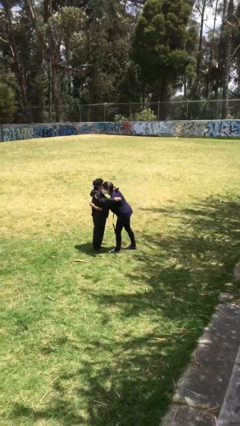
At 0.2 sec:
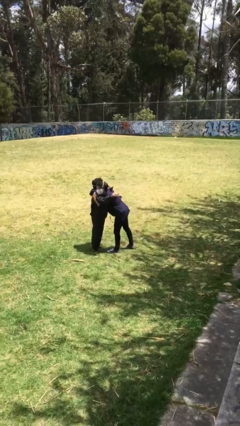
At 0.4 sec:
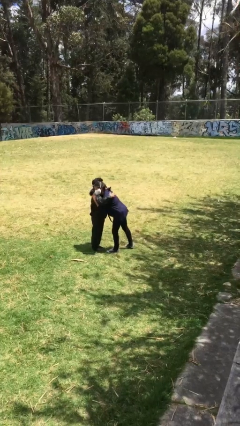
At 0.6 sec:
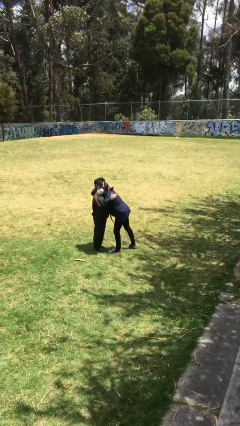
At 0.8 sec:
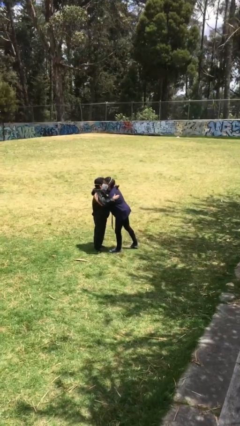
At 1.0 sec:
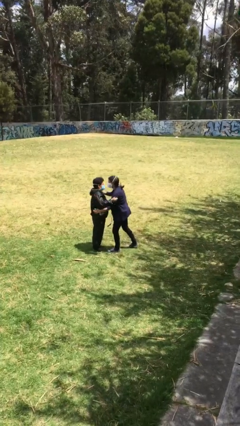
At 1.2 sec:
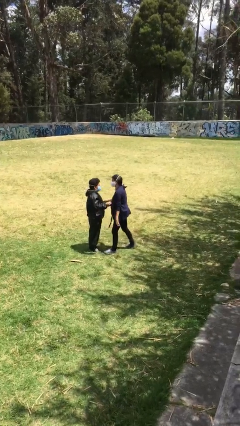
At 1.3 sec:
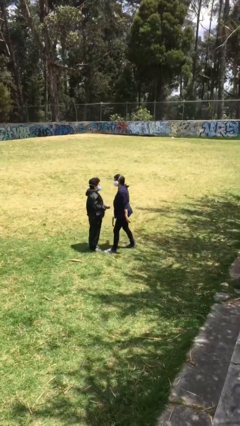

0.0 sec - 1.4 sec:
person embraces person

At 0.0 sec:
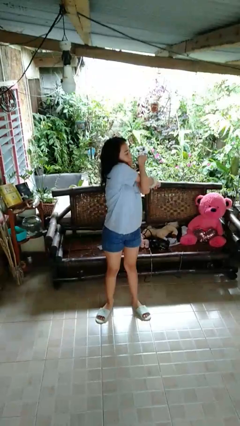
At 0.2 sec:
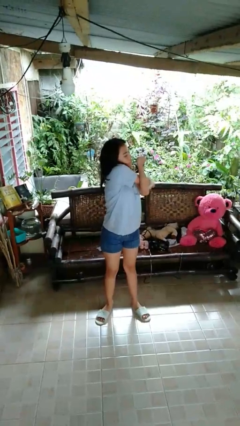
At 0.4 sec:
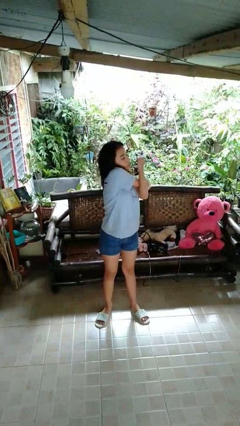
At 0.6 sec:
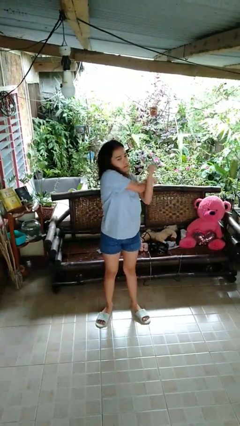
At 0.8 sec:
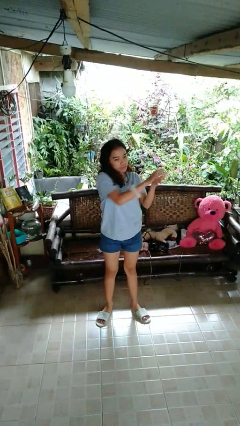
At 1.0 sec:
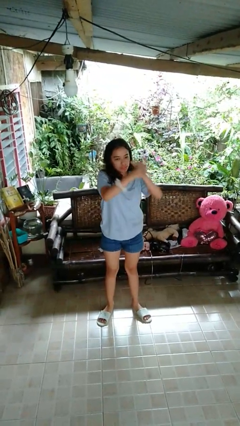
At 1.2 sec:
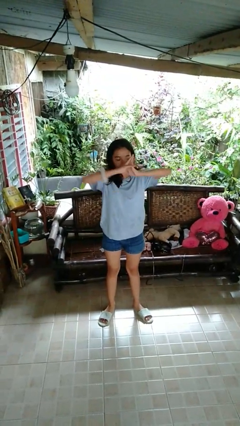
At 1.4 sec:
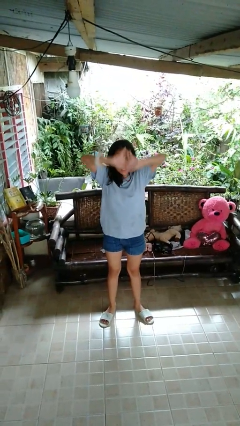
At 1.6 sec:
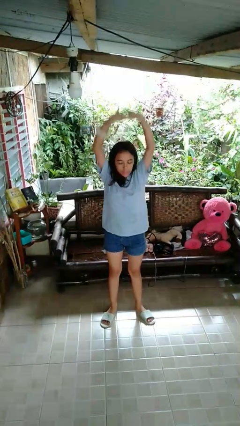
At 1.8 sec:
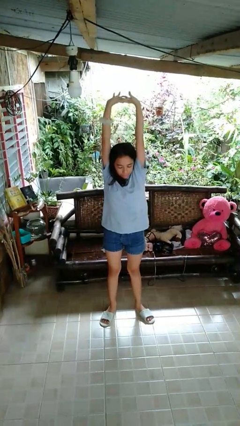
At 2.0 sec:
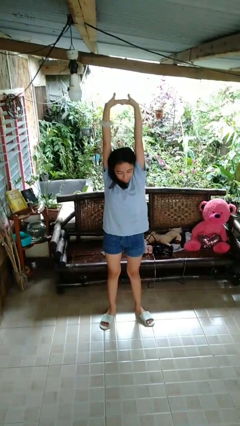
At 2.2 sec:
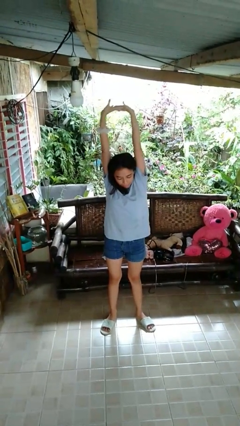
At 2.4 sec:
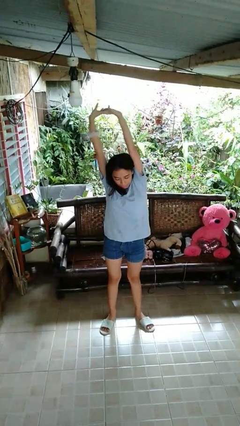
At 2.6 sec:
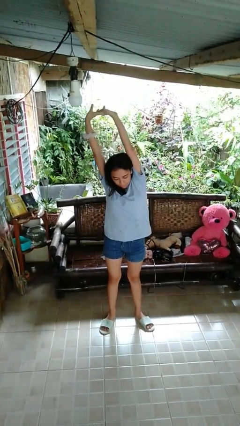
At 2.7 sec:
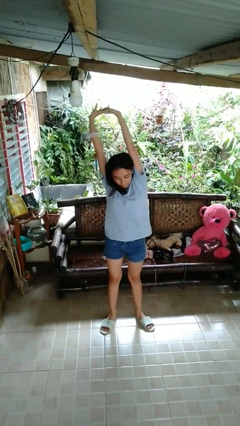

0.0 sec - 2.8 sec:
person stretches arms over head

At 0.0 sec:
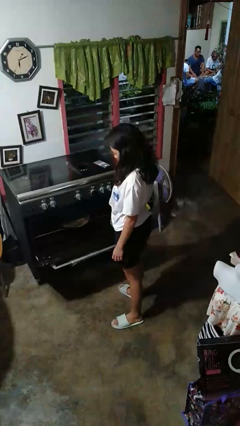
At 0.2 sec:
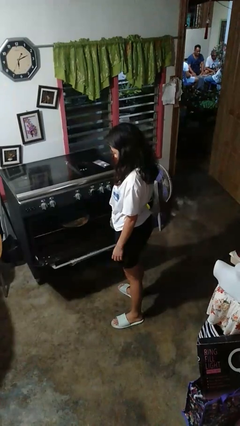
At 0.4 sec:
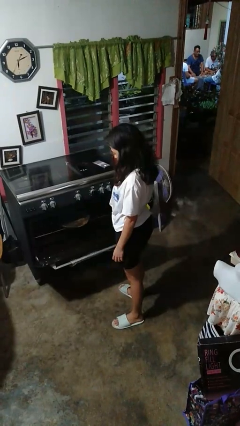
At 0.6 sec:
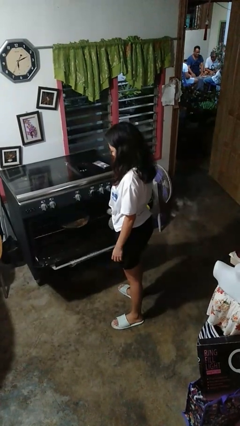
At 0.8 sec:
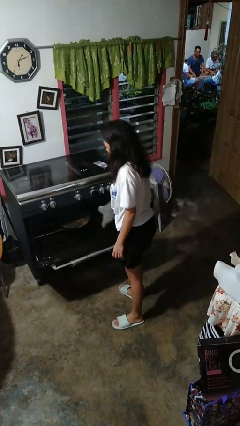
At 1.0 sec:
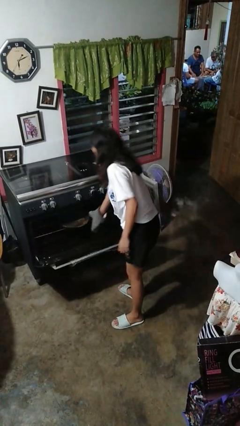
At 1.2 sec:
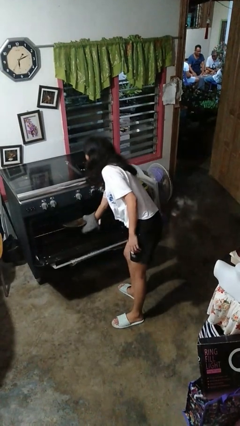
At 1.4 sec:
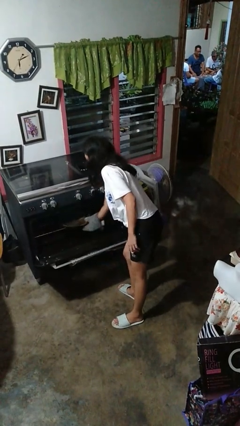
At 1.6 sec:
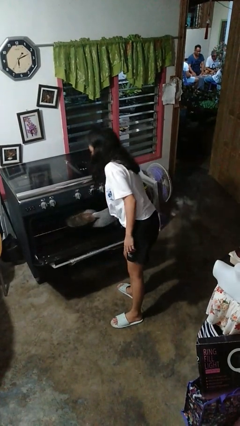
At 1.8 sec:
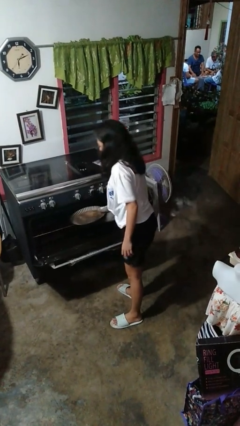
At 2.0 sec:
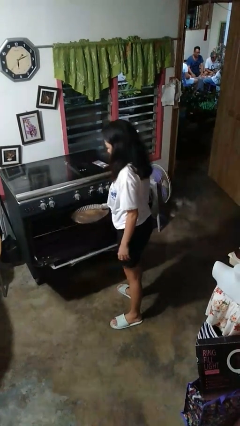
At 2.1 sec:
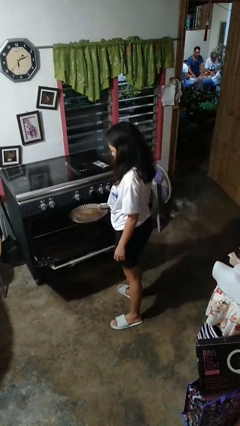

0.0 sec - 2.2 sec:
person takes object from oven

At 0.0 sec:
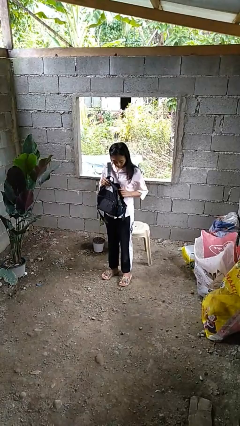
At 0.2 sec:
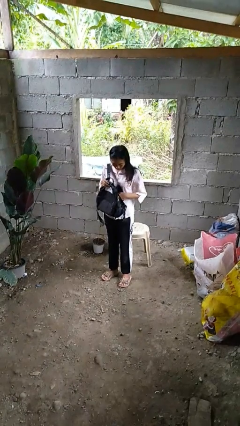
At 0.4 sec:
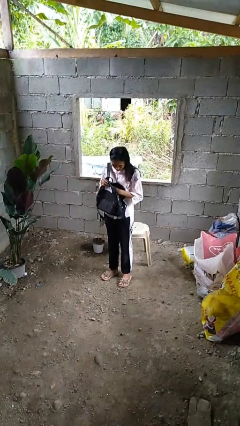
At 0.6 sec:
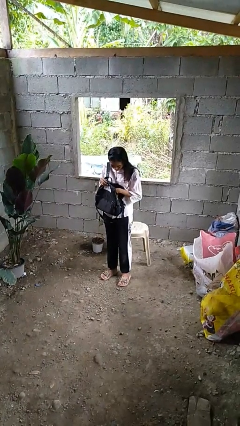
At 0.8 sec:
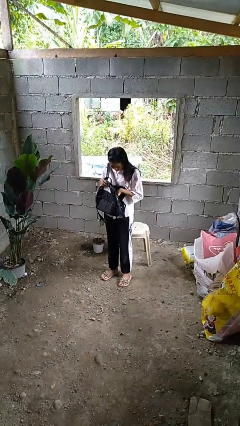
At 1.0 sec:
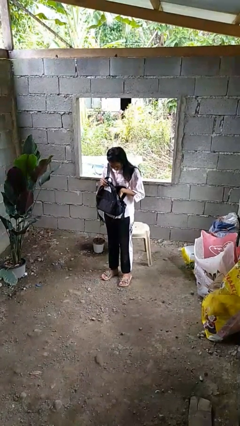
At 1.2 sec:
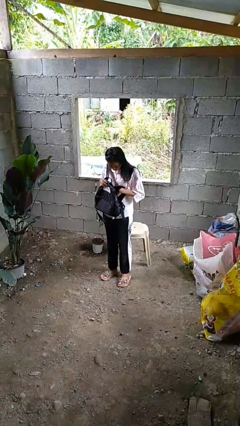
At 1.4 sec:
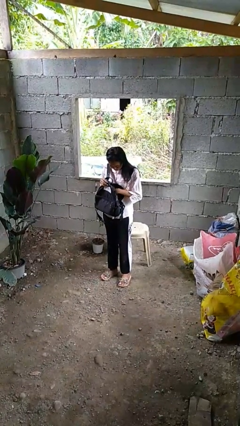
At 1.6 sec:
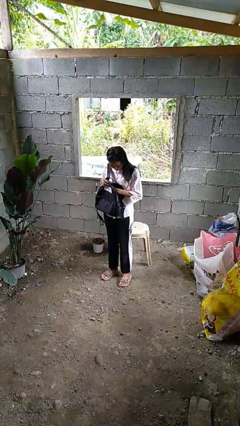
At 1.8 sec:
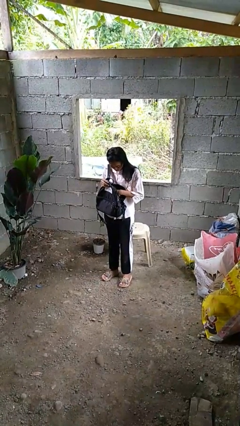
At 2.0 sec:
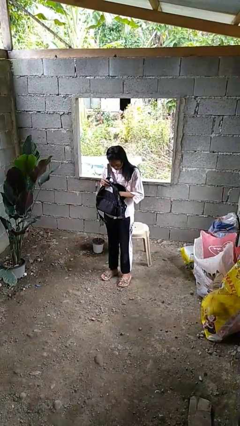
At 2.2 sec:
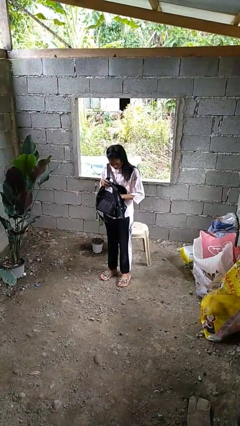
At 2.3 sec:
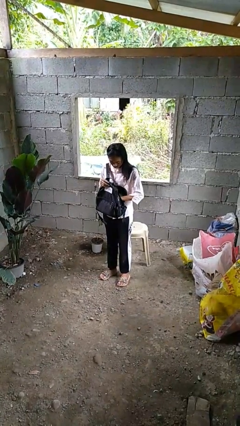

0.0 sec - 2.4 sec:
person searches in backpack

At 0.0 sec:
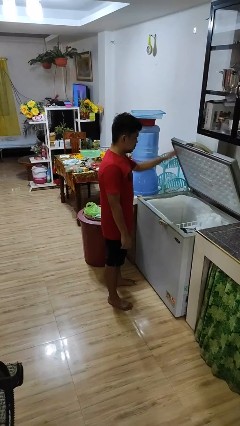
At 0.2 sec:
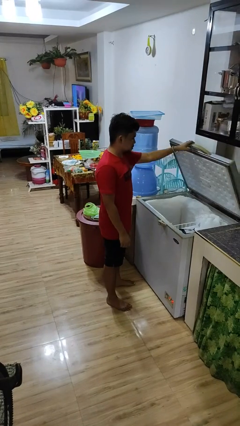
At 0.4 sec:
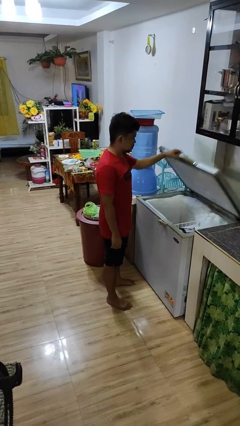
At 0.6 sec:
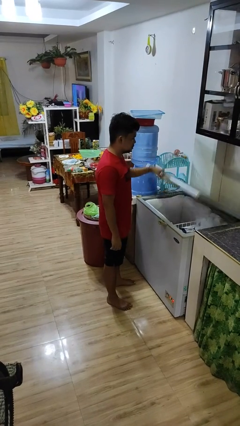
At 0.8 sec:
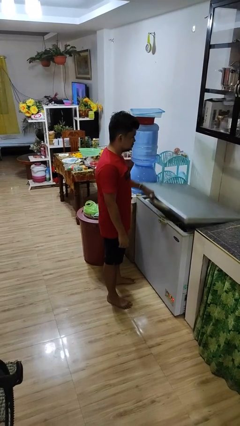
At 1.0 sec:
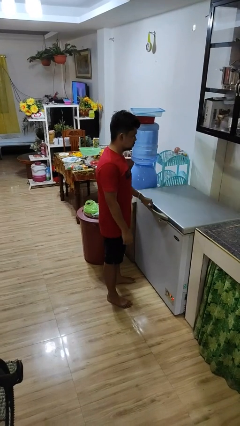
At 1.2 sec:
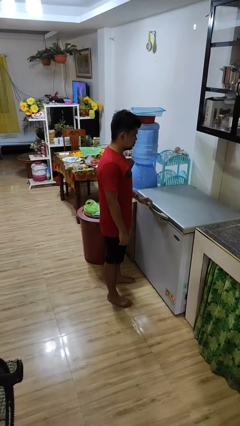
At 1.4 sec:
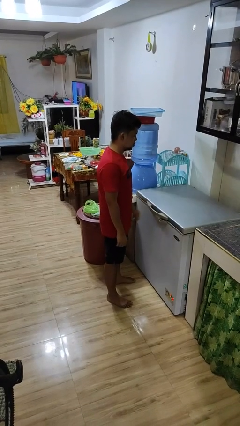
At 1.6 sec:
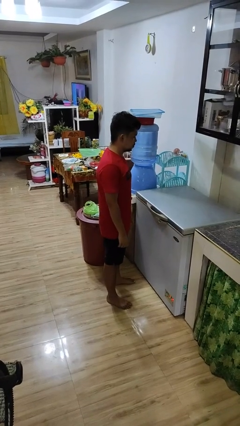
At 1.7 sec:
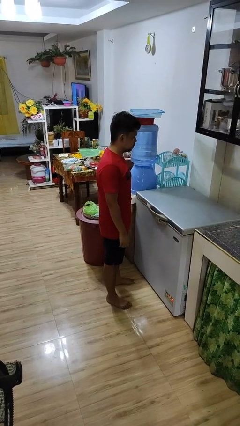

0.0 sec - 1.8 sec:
person closes refrigerator

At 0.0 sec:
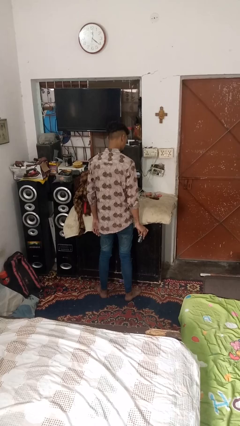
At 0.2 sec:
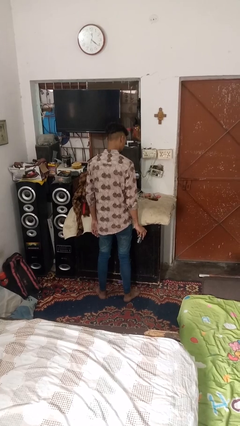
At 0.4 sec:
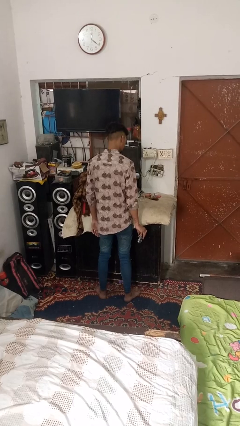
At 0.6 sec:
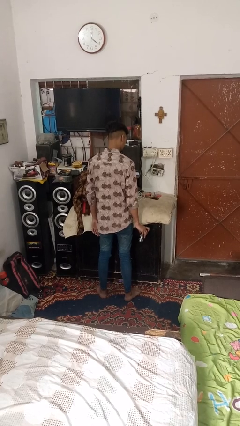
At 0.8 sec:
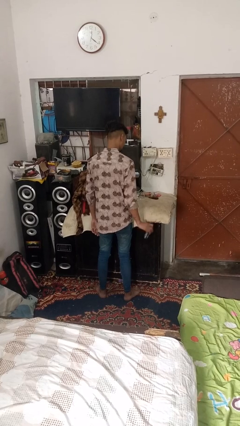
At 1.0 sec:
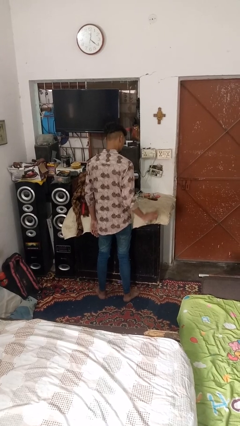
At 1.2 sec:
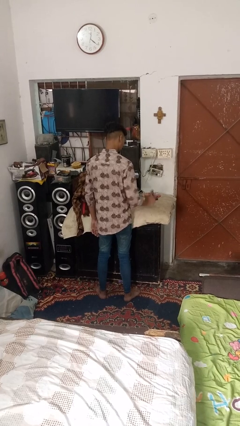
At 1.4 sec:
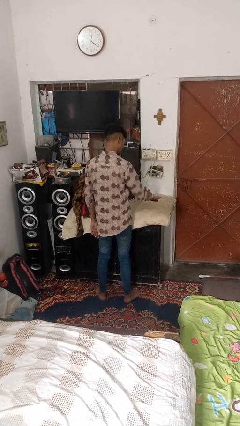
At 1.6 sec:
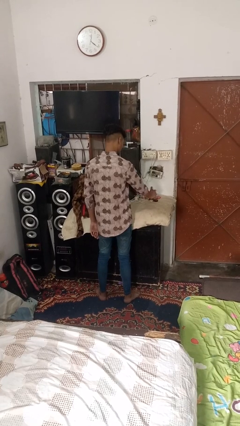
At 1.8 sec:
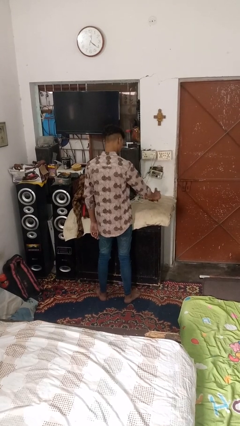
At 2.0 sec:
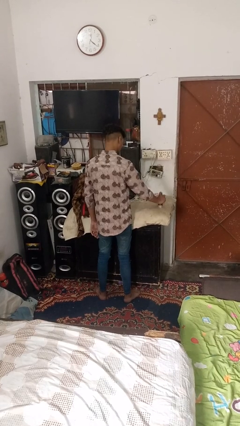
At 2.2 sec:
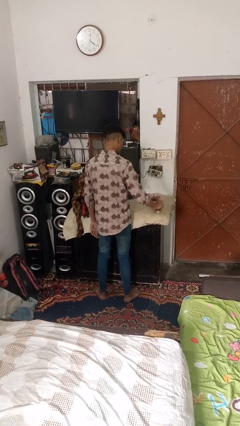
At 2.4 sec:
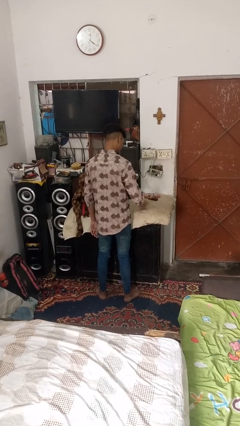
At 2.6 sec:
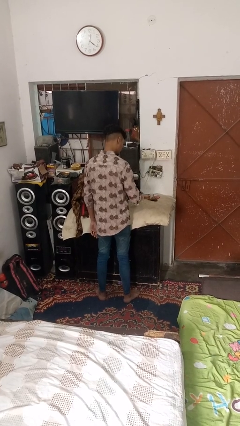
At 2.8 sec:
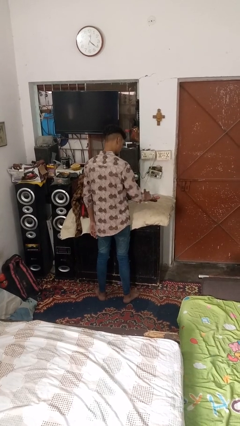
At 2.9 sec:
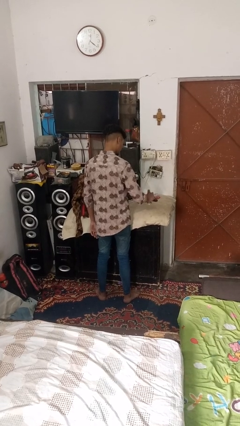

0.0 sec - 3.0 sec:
person sprays from bottle

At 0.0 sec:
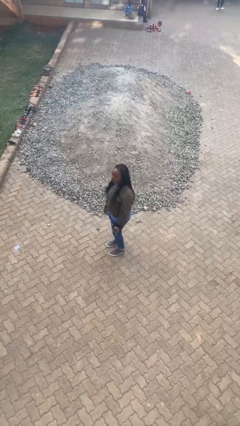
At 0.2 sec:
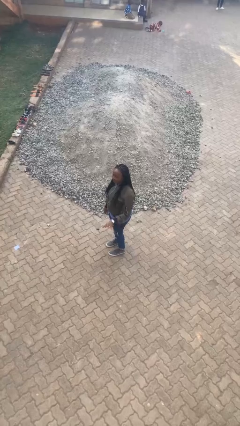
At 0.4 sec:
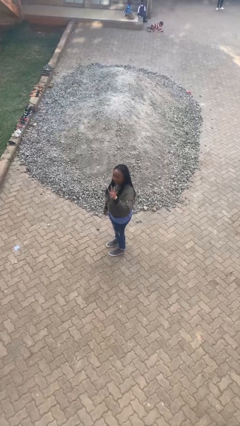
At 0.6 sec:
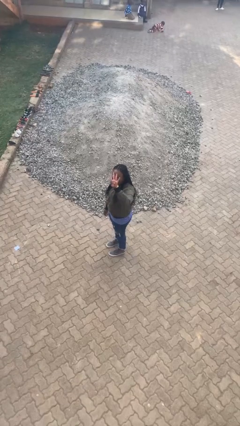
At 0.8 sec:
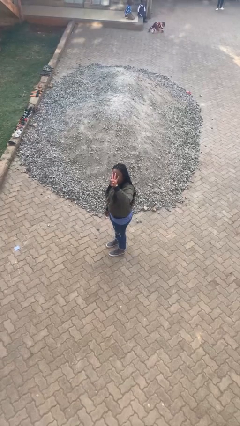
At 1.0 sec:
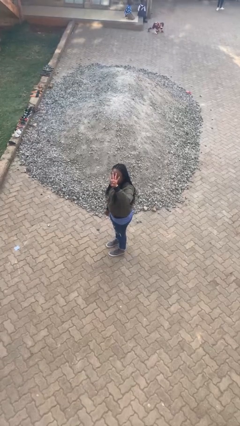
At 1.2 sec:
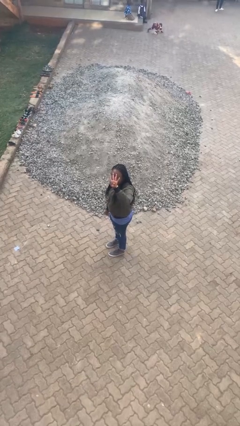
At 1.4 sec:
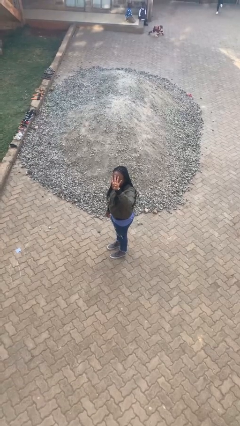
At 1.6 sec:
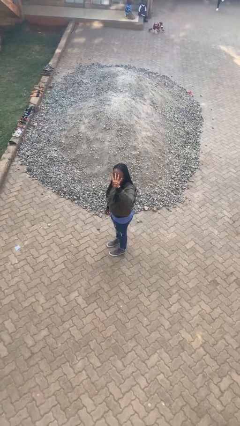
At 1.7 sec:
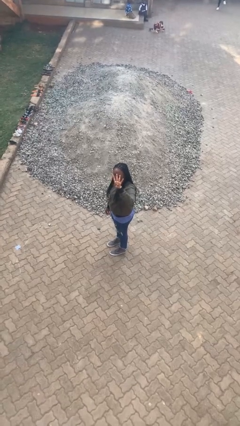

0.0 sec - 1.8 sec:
person gestures number four

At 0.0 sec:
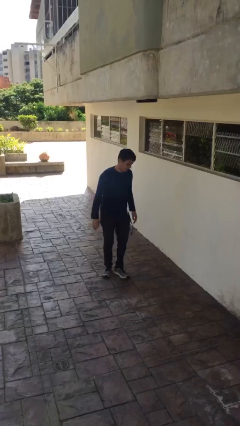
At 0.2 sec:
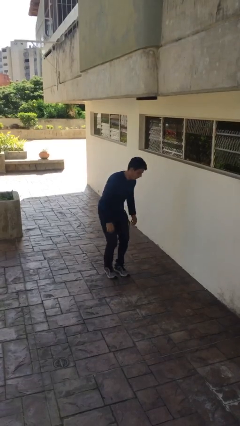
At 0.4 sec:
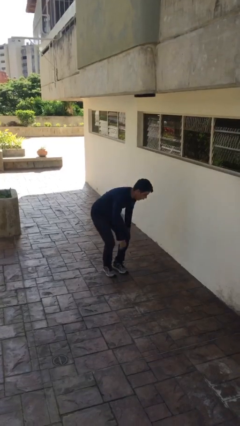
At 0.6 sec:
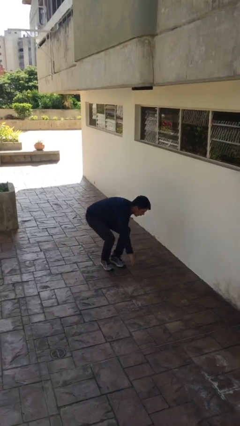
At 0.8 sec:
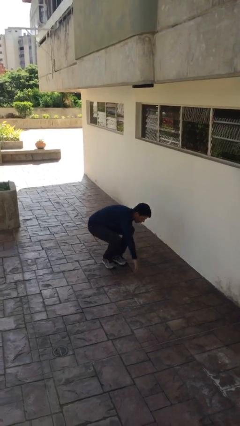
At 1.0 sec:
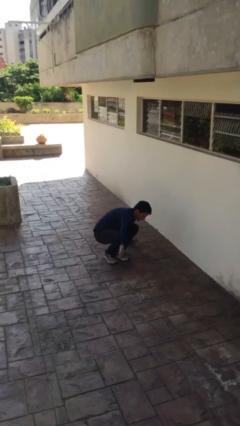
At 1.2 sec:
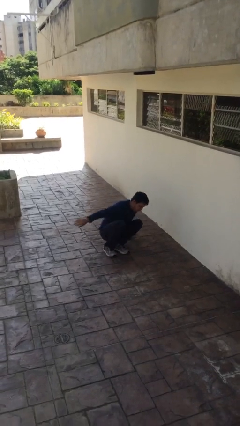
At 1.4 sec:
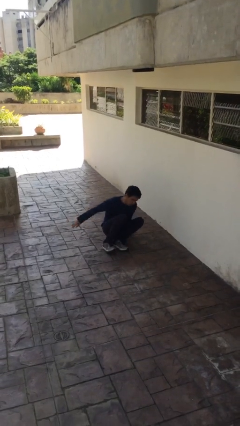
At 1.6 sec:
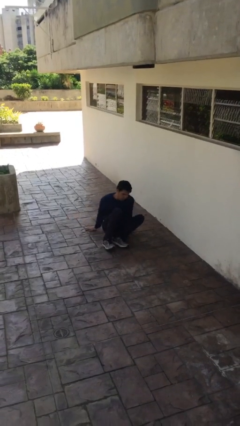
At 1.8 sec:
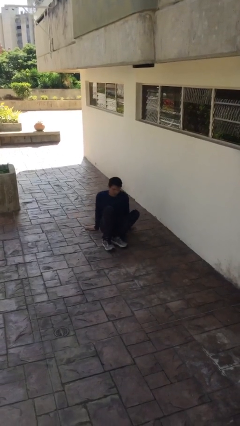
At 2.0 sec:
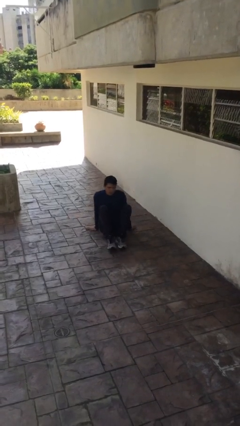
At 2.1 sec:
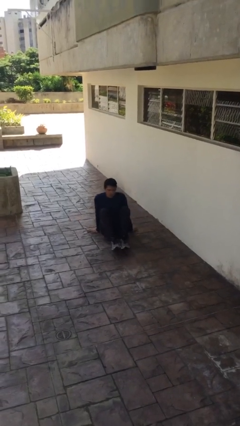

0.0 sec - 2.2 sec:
person sits down
